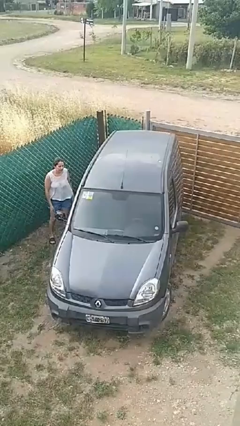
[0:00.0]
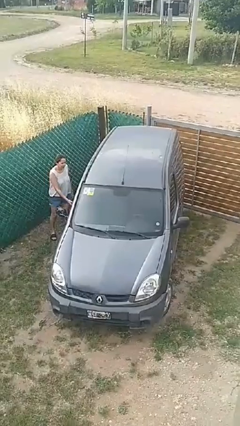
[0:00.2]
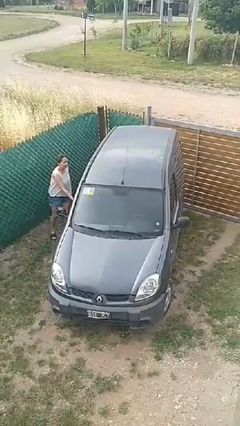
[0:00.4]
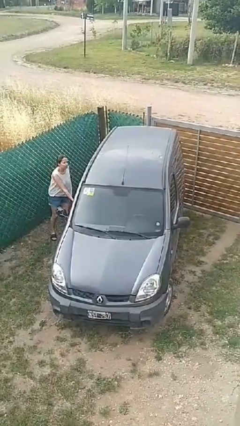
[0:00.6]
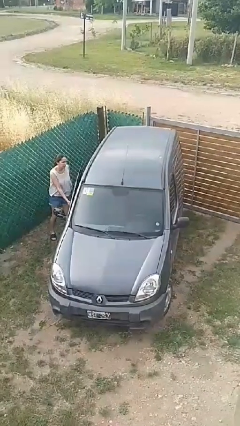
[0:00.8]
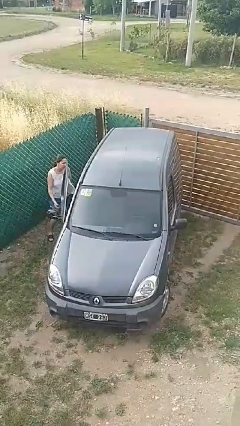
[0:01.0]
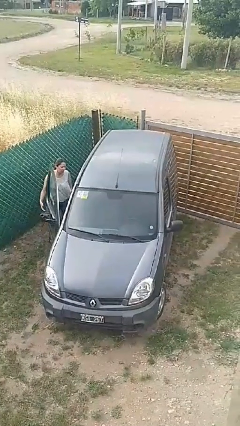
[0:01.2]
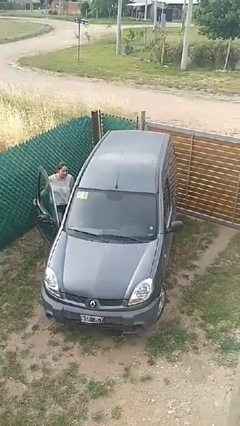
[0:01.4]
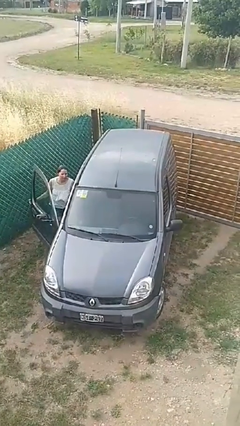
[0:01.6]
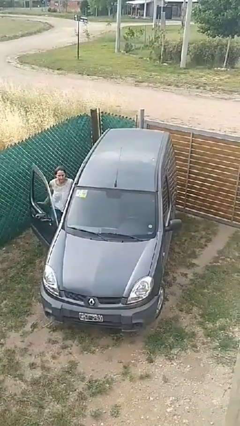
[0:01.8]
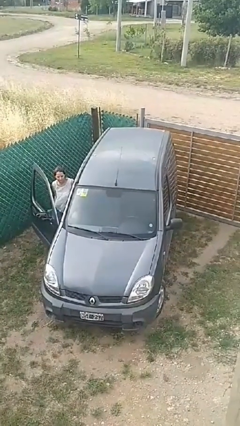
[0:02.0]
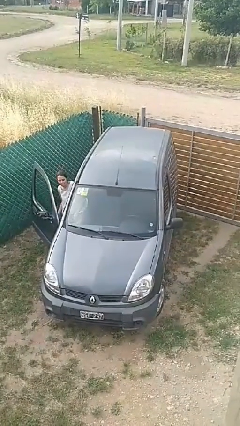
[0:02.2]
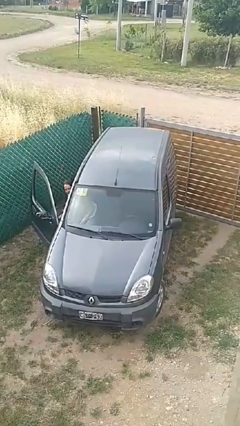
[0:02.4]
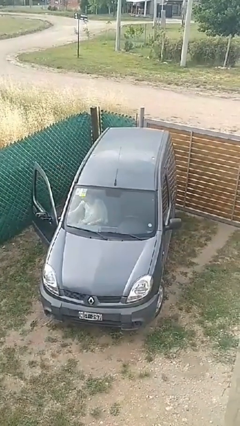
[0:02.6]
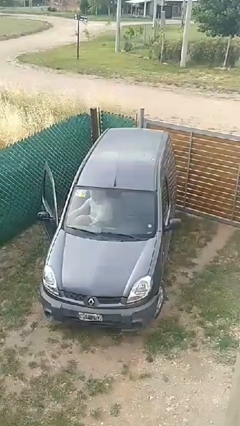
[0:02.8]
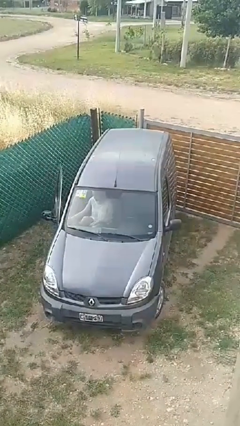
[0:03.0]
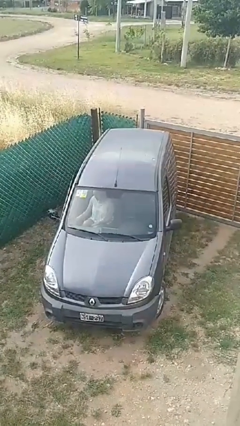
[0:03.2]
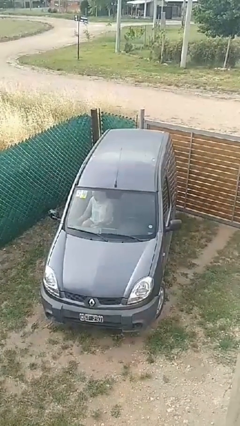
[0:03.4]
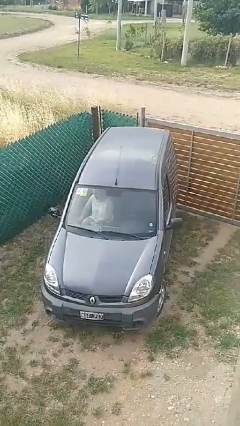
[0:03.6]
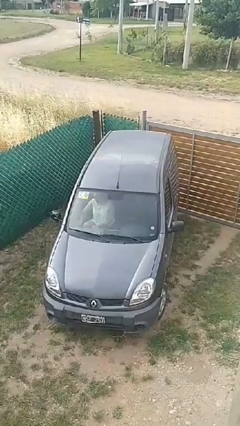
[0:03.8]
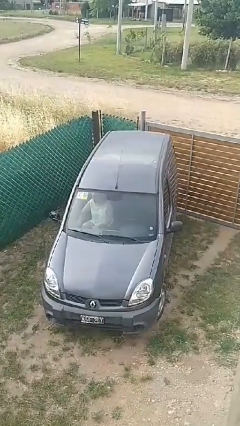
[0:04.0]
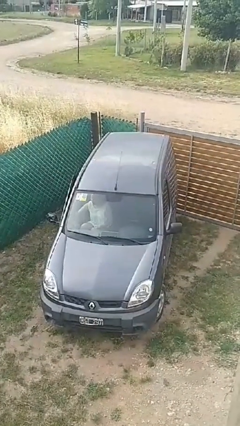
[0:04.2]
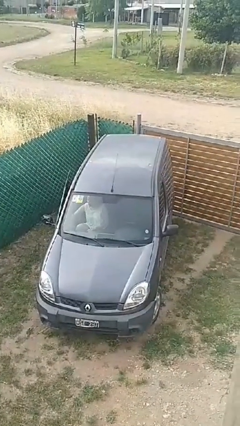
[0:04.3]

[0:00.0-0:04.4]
car picks up person

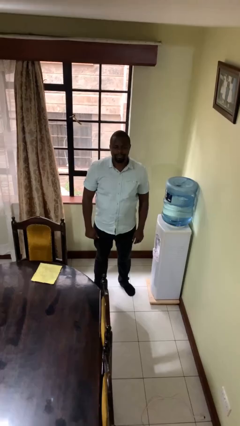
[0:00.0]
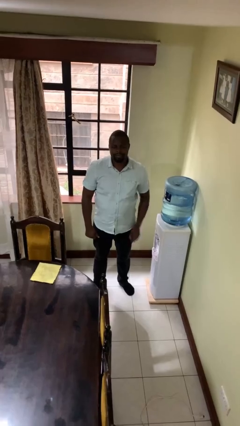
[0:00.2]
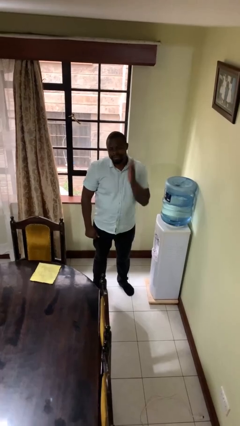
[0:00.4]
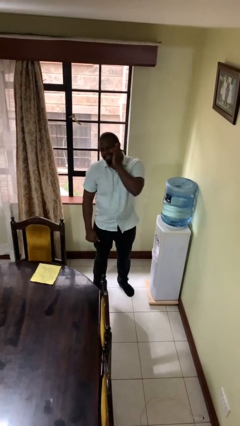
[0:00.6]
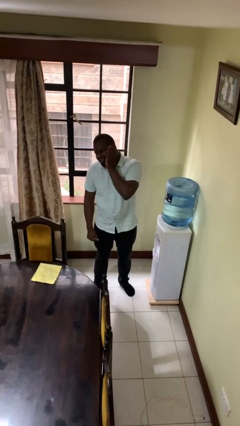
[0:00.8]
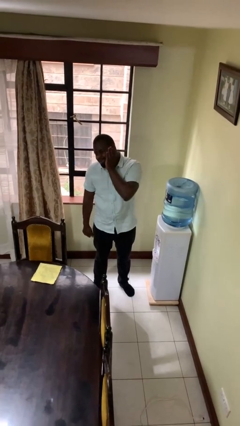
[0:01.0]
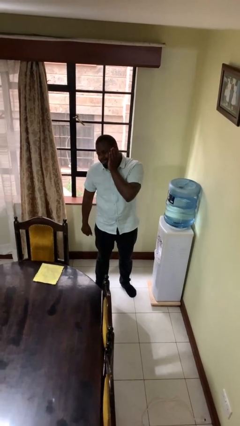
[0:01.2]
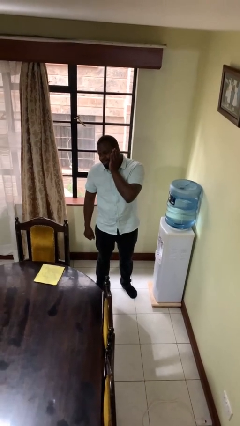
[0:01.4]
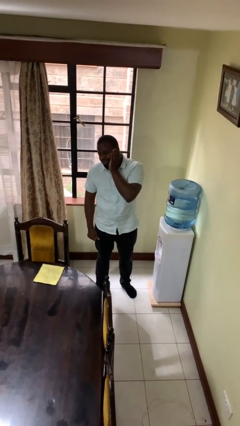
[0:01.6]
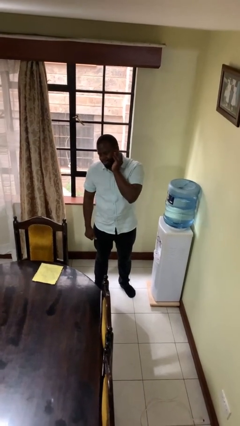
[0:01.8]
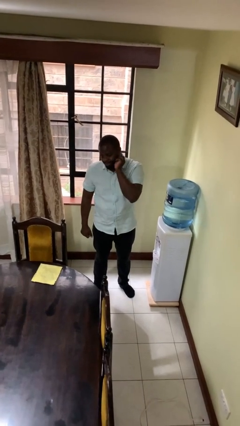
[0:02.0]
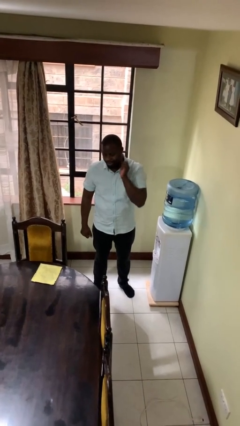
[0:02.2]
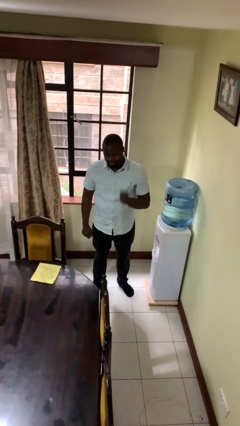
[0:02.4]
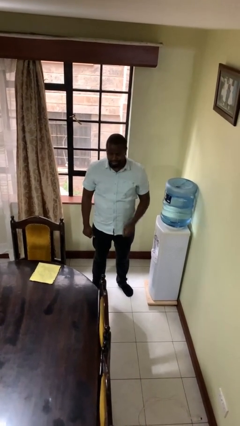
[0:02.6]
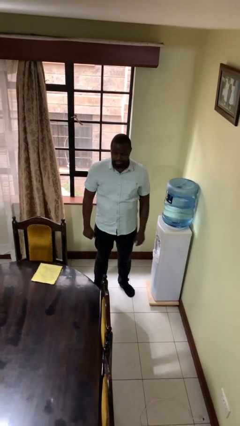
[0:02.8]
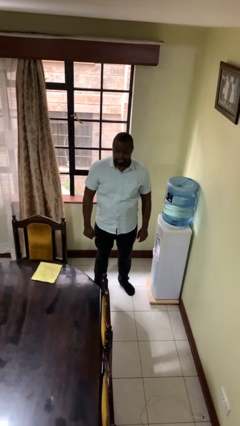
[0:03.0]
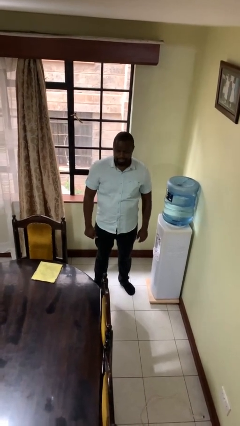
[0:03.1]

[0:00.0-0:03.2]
person swats bug

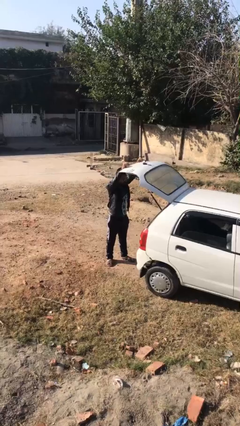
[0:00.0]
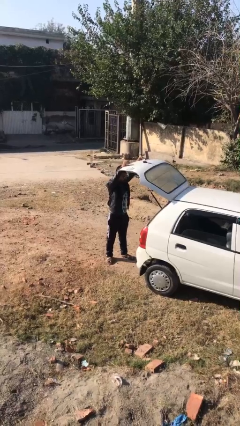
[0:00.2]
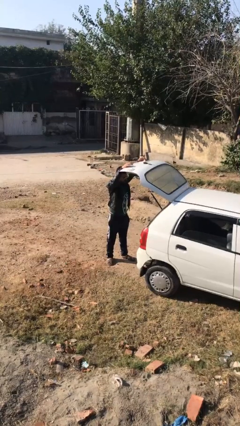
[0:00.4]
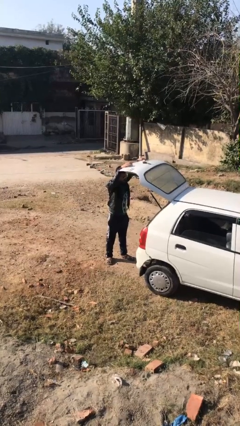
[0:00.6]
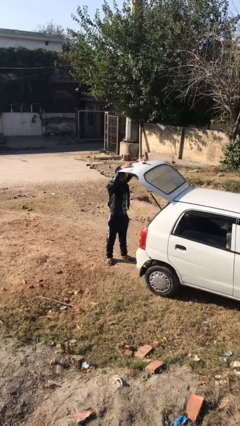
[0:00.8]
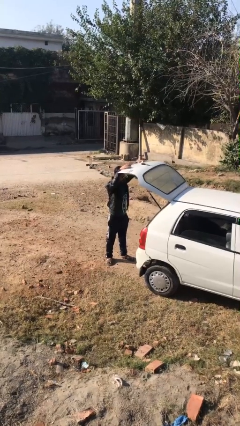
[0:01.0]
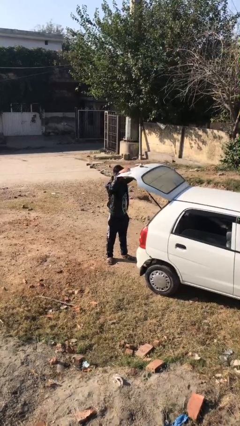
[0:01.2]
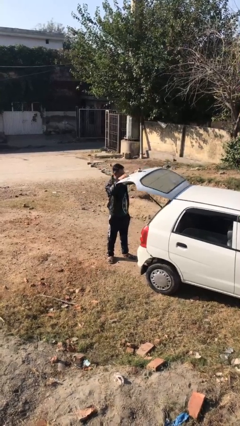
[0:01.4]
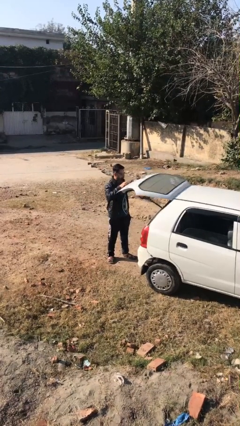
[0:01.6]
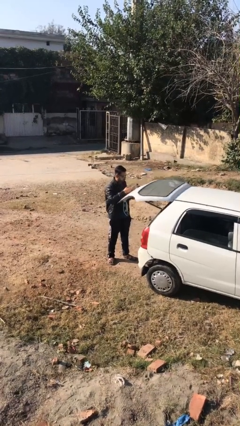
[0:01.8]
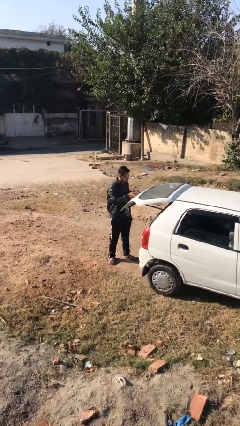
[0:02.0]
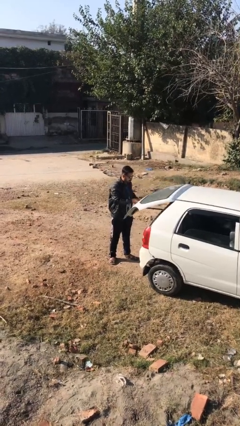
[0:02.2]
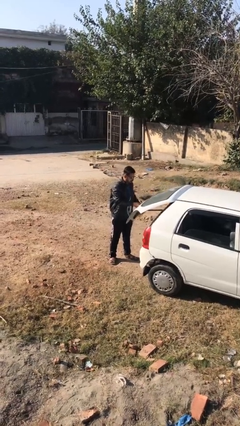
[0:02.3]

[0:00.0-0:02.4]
person closes car trunk

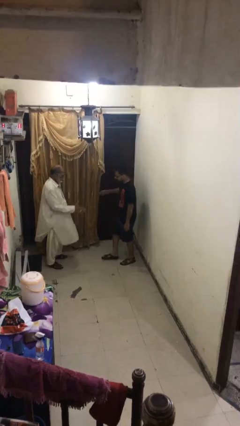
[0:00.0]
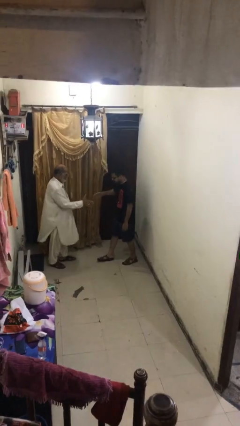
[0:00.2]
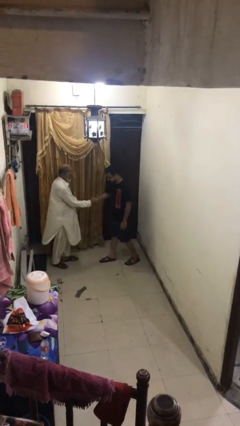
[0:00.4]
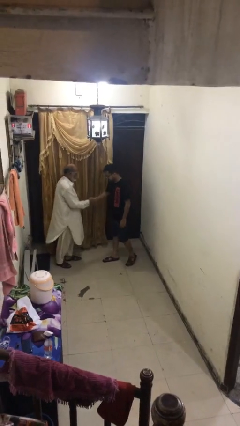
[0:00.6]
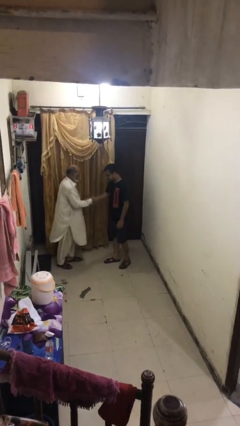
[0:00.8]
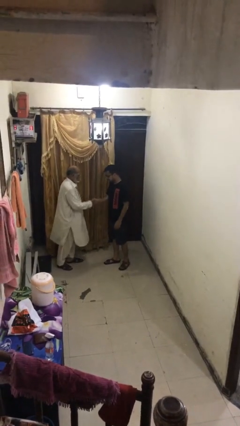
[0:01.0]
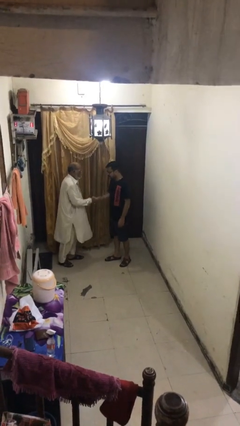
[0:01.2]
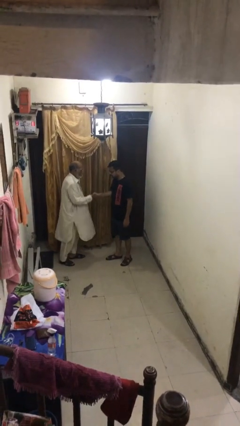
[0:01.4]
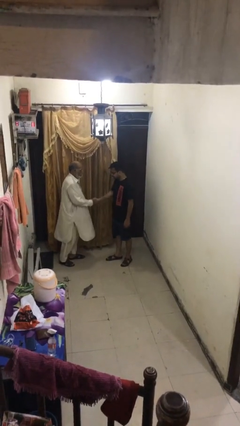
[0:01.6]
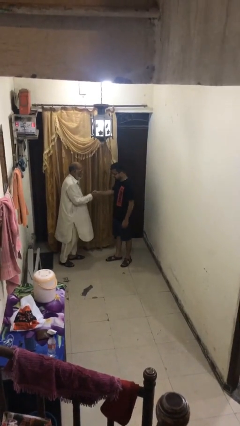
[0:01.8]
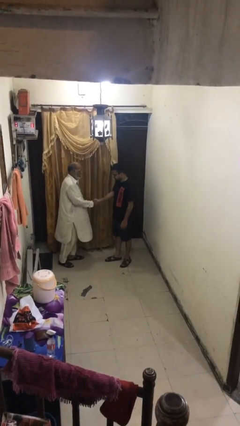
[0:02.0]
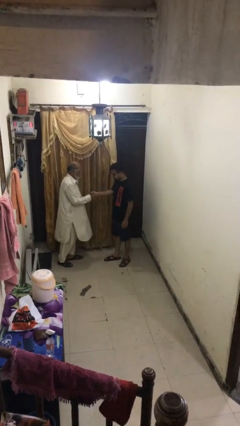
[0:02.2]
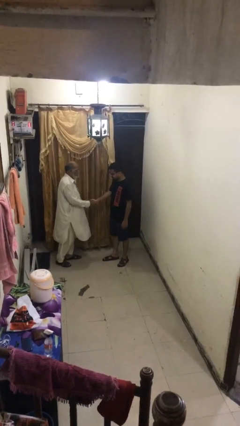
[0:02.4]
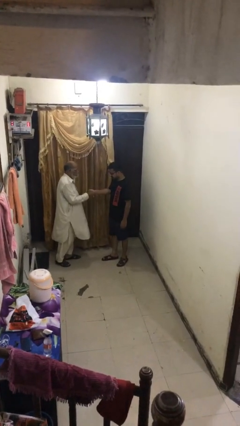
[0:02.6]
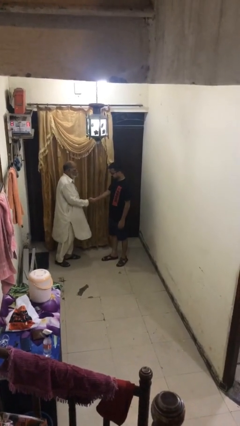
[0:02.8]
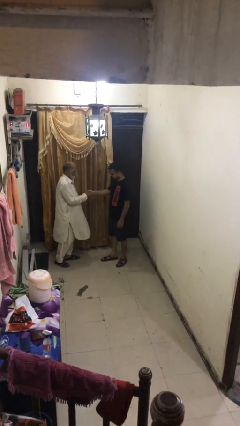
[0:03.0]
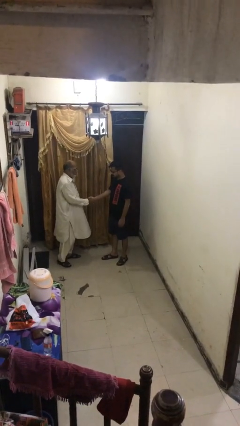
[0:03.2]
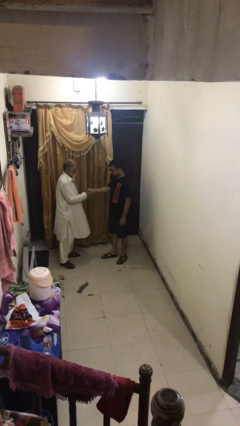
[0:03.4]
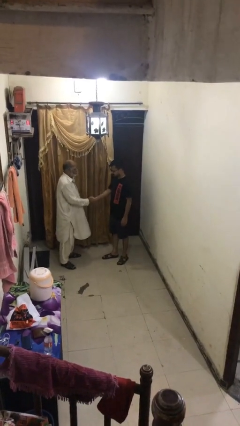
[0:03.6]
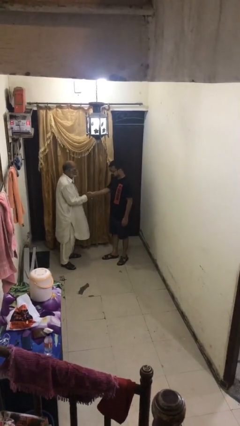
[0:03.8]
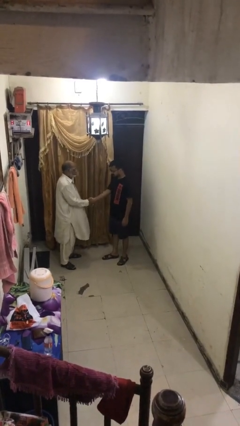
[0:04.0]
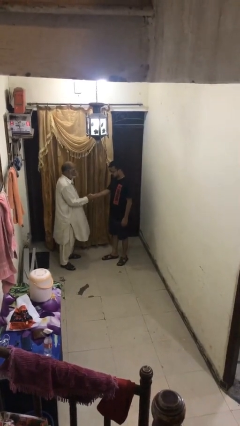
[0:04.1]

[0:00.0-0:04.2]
person shakes hand

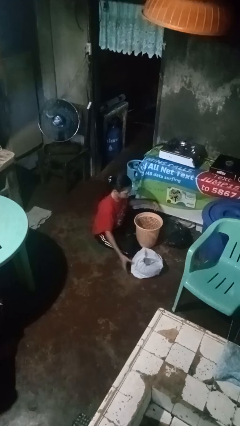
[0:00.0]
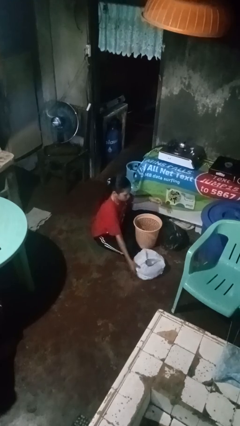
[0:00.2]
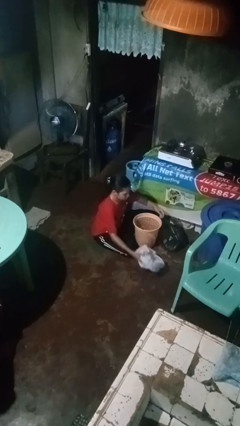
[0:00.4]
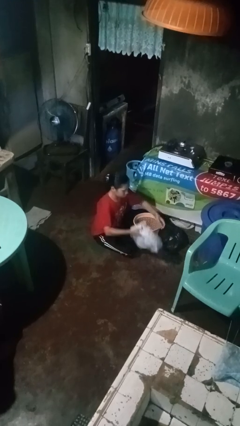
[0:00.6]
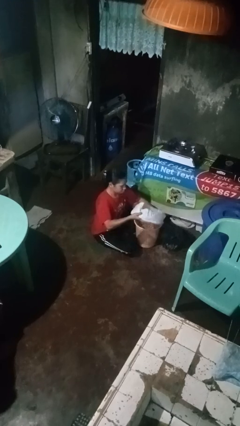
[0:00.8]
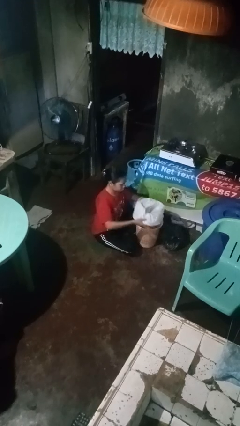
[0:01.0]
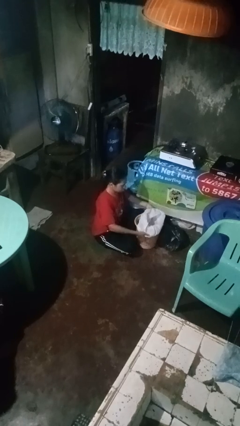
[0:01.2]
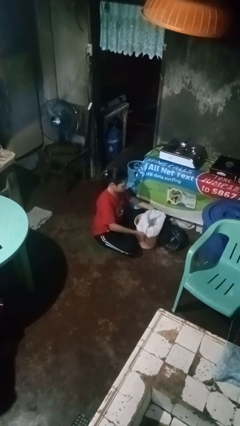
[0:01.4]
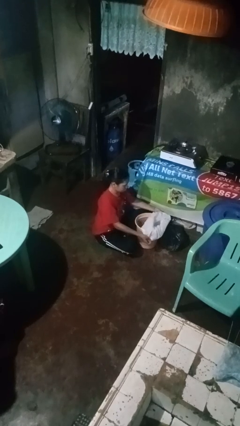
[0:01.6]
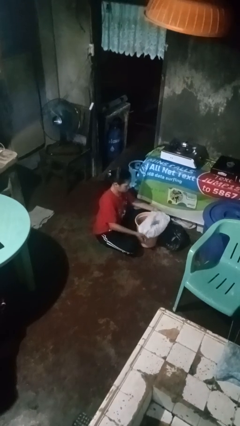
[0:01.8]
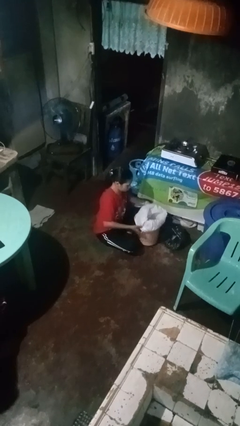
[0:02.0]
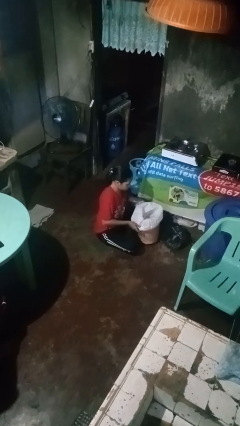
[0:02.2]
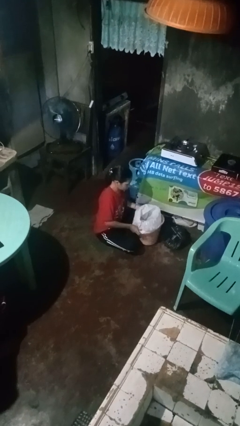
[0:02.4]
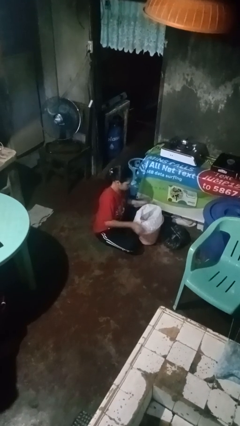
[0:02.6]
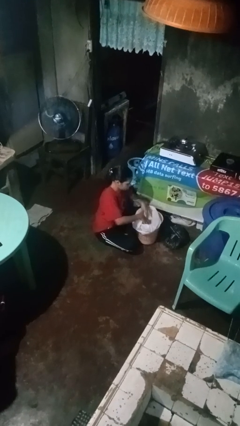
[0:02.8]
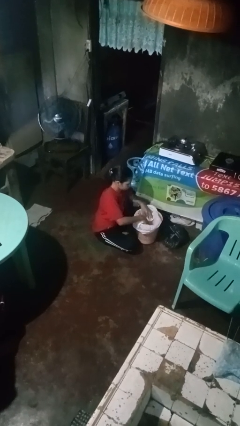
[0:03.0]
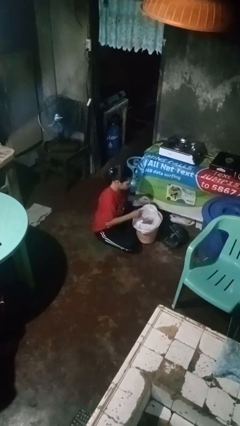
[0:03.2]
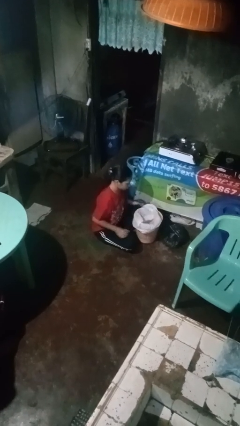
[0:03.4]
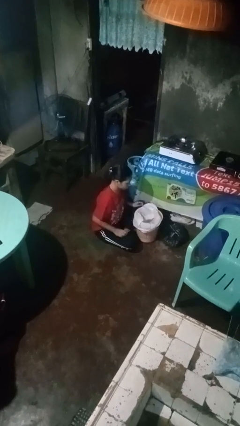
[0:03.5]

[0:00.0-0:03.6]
person inserts trashbag into trashcan
